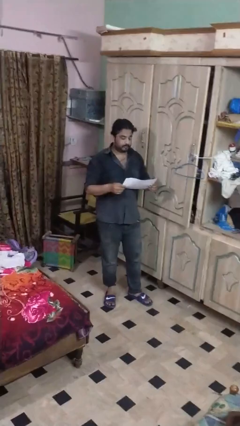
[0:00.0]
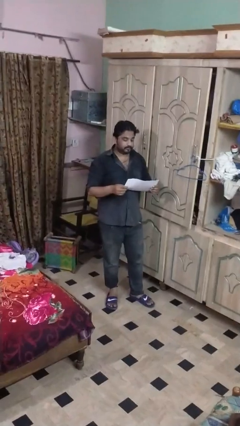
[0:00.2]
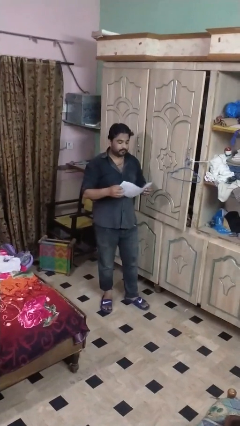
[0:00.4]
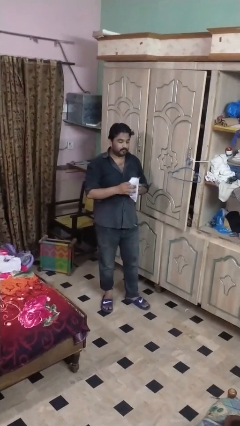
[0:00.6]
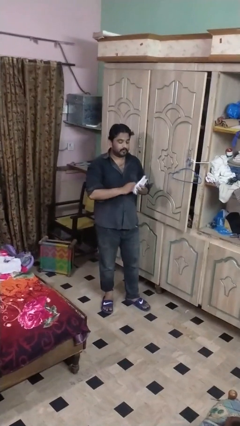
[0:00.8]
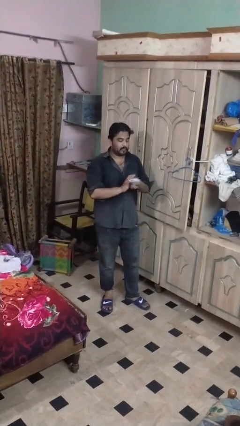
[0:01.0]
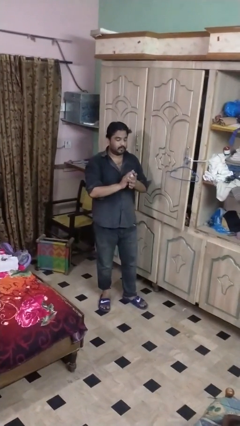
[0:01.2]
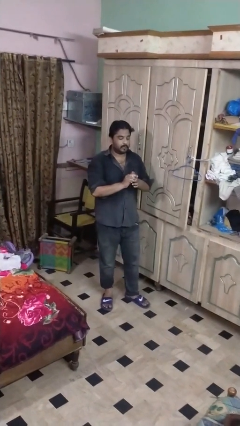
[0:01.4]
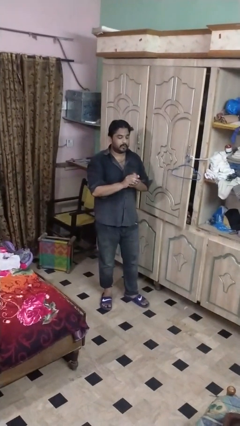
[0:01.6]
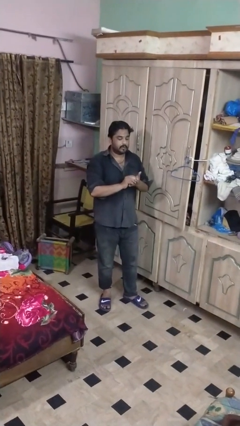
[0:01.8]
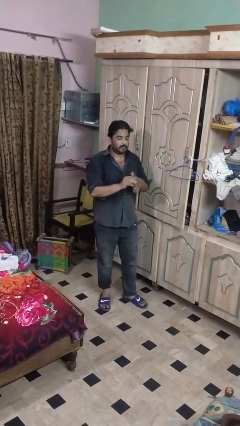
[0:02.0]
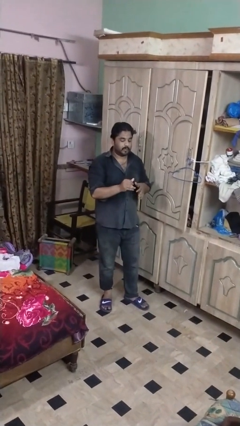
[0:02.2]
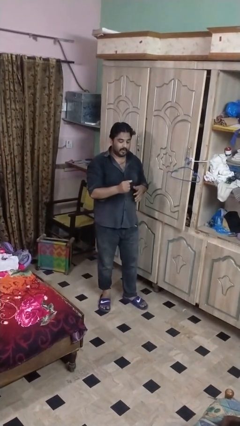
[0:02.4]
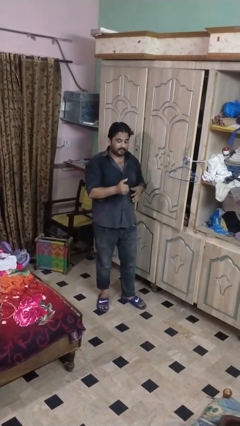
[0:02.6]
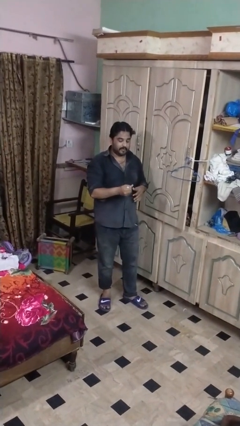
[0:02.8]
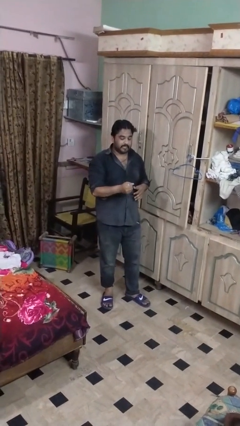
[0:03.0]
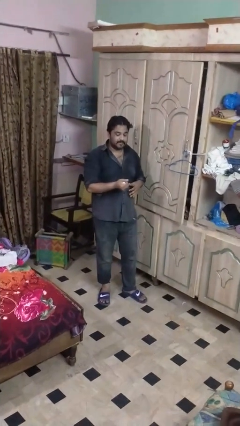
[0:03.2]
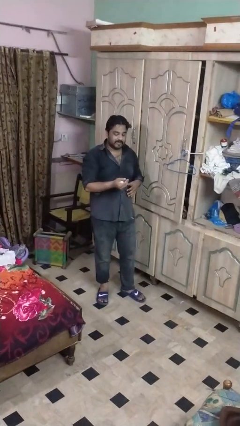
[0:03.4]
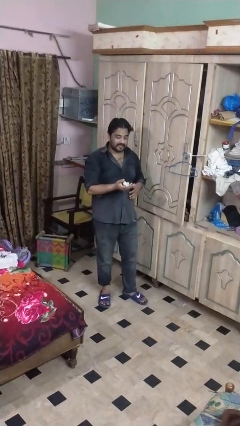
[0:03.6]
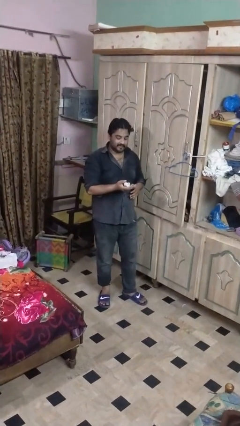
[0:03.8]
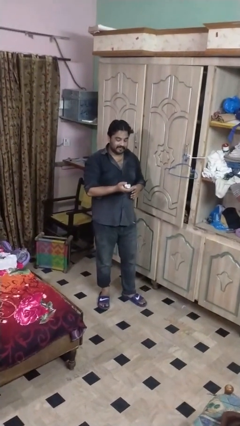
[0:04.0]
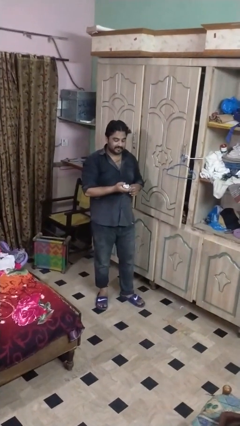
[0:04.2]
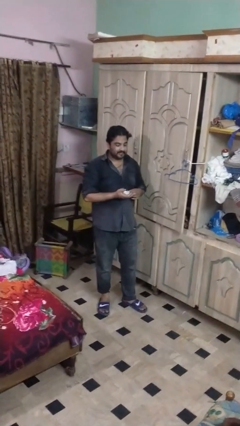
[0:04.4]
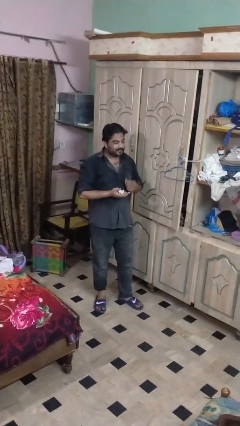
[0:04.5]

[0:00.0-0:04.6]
person crumples paper

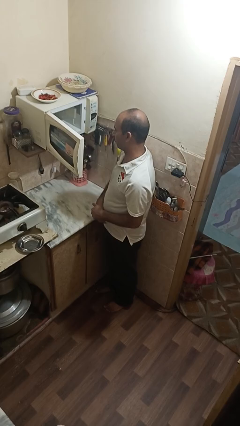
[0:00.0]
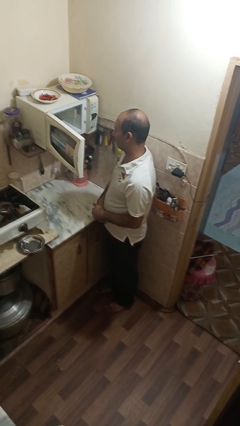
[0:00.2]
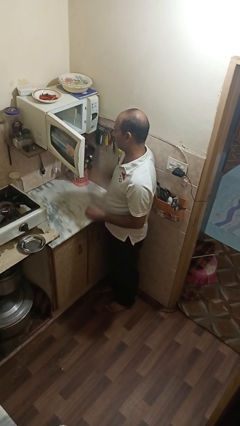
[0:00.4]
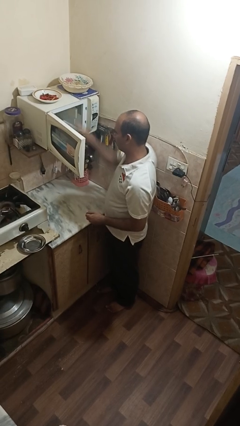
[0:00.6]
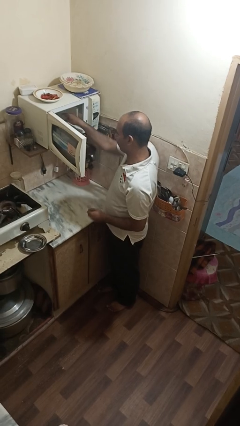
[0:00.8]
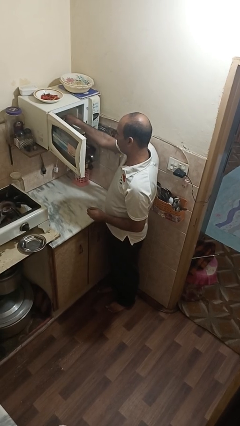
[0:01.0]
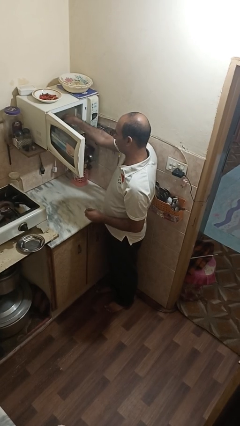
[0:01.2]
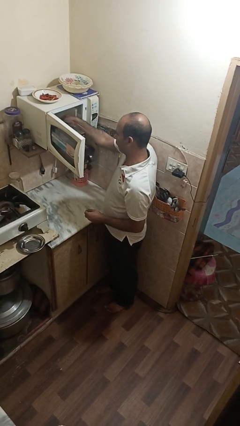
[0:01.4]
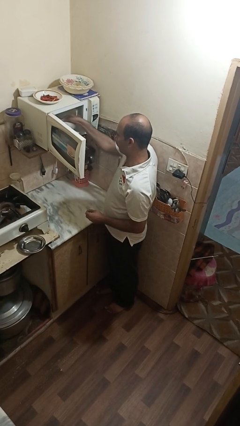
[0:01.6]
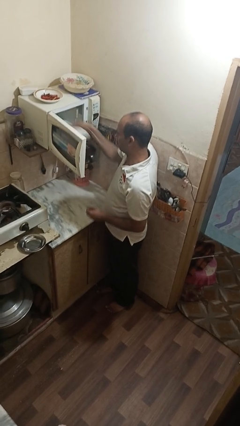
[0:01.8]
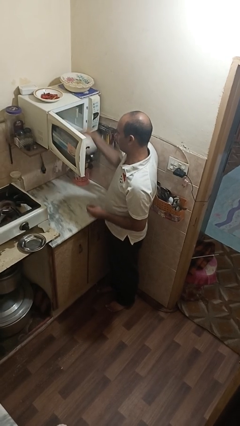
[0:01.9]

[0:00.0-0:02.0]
person takes object from microwave

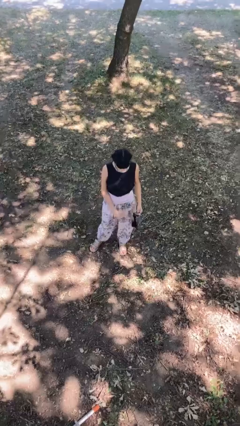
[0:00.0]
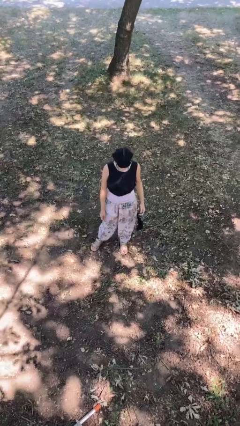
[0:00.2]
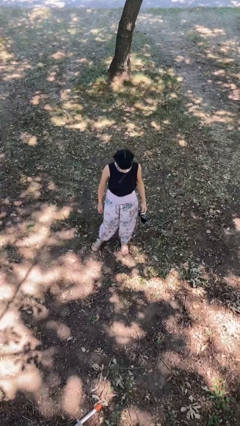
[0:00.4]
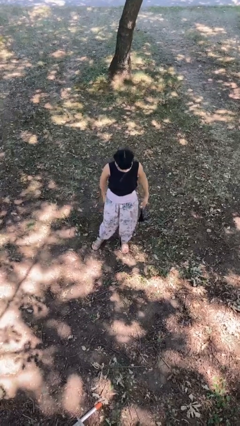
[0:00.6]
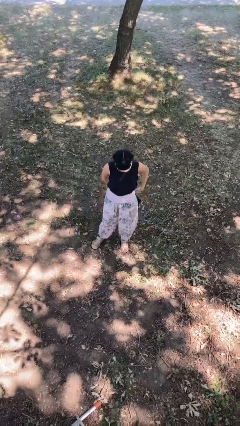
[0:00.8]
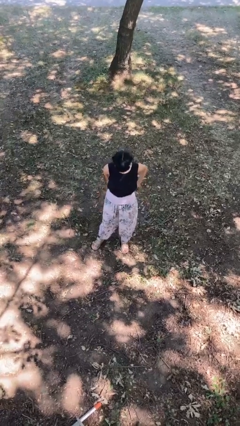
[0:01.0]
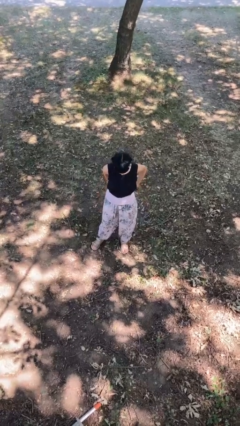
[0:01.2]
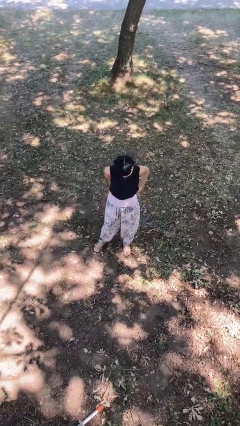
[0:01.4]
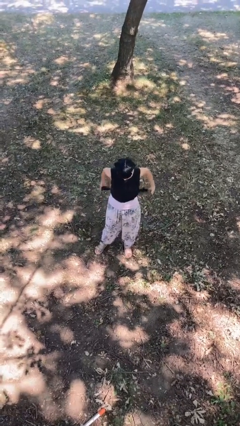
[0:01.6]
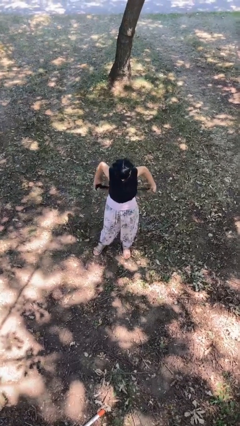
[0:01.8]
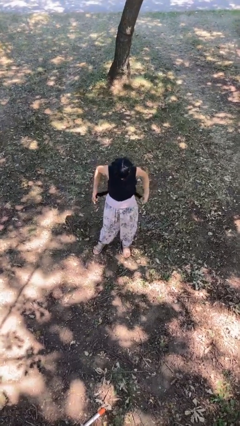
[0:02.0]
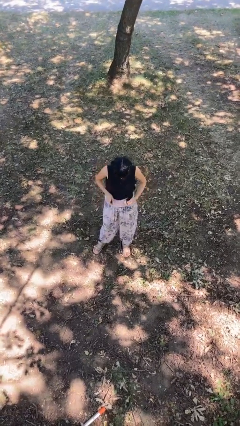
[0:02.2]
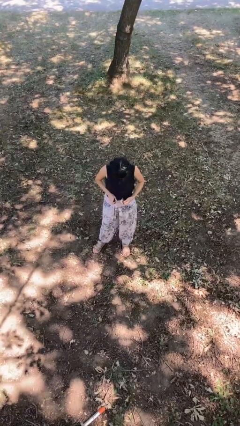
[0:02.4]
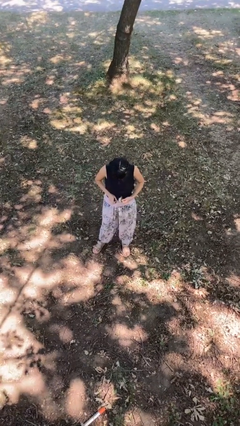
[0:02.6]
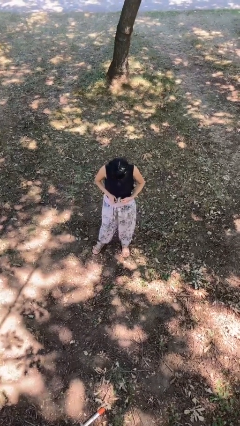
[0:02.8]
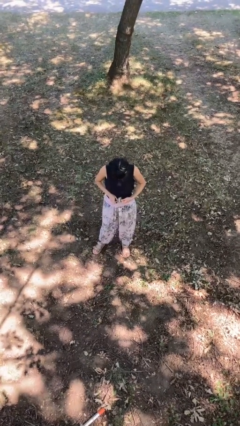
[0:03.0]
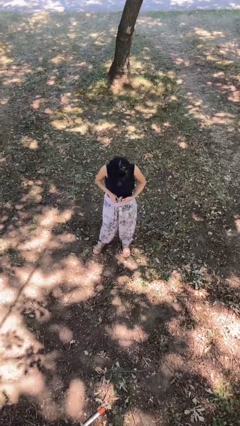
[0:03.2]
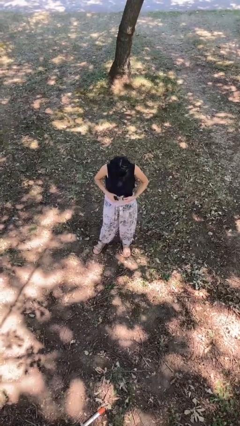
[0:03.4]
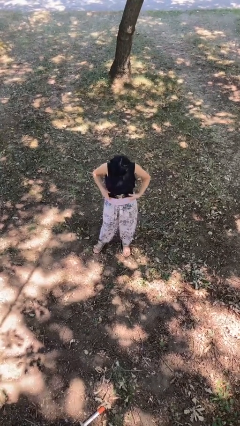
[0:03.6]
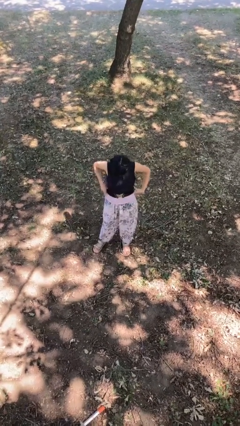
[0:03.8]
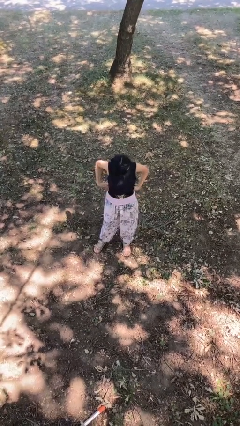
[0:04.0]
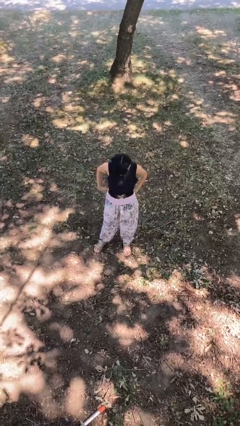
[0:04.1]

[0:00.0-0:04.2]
person puts on belt

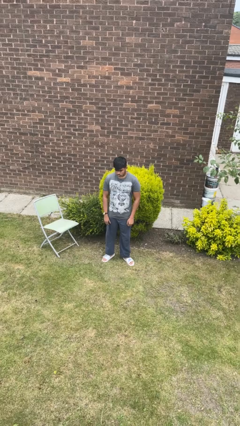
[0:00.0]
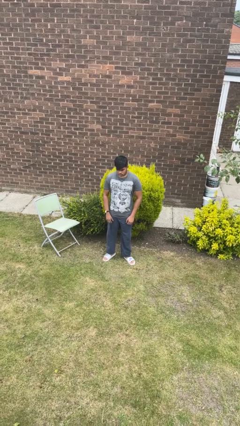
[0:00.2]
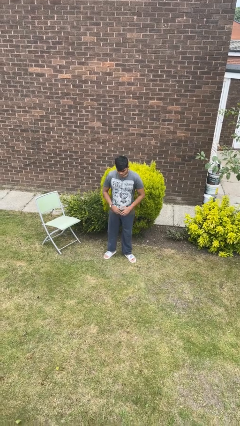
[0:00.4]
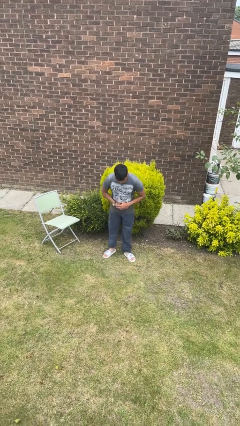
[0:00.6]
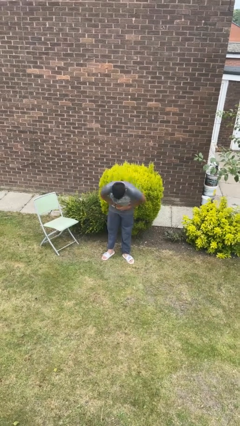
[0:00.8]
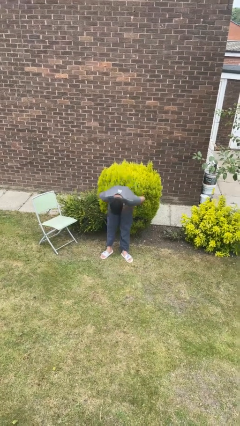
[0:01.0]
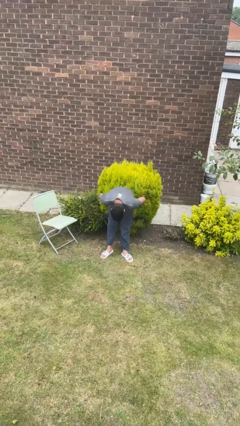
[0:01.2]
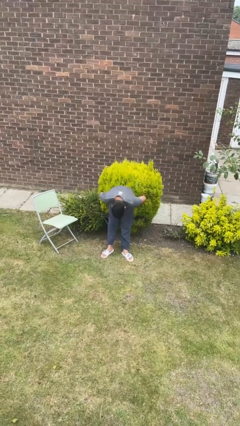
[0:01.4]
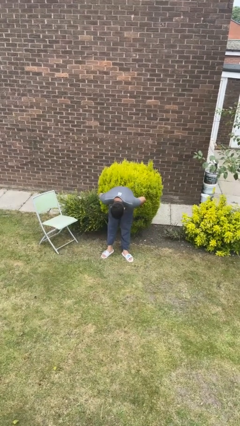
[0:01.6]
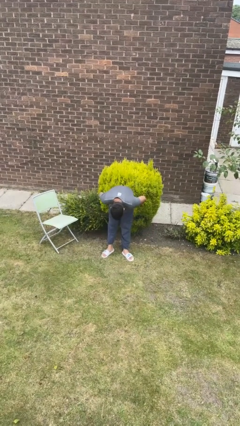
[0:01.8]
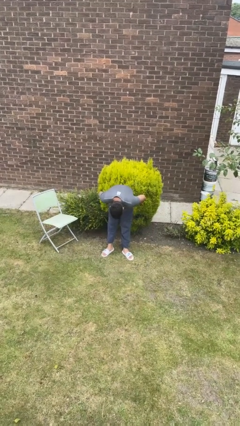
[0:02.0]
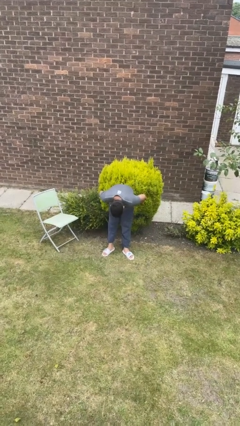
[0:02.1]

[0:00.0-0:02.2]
person bows

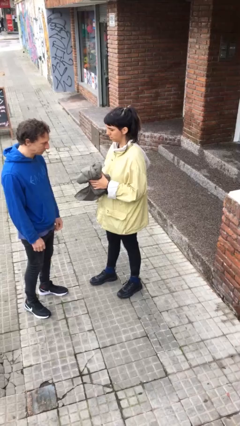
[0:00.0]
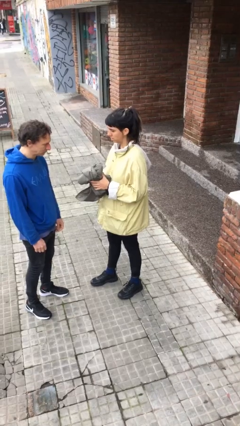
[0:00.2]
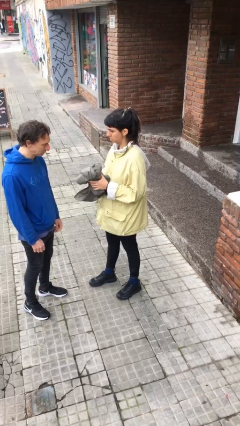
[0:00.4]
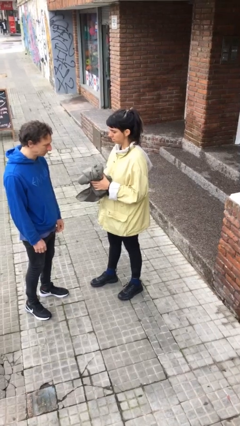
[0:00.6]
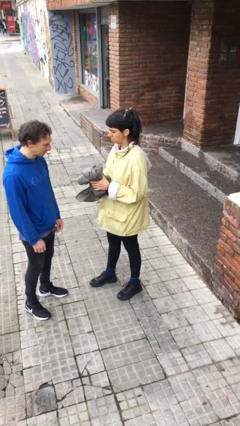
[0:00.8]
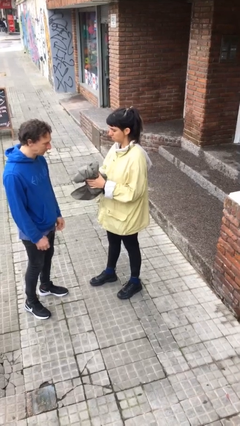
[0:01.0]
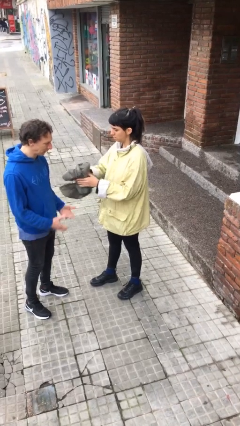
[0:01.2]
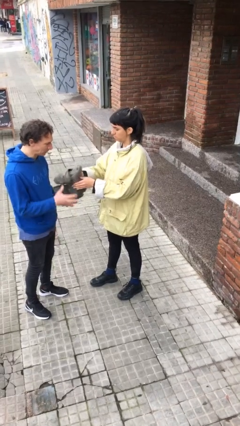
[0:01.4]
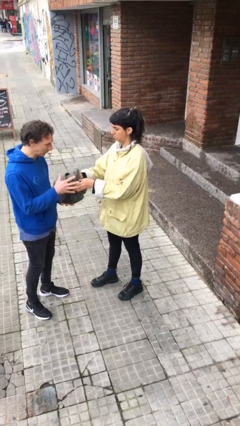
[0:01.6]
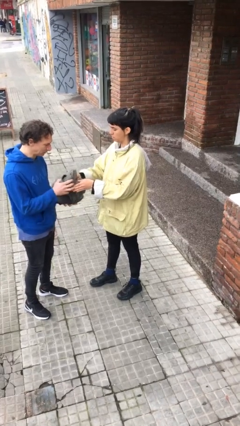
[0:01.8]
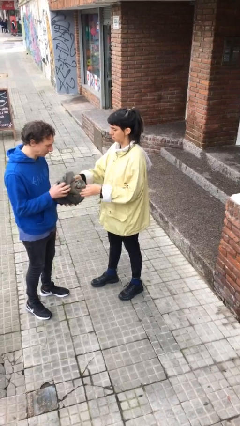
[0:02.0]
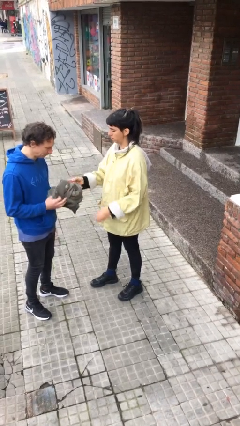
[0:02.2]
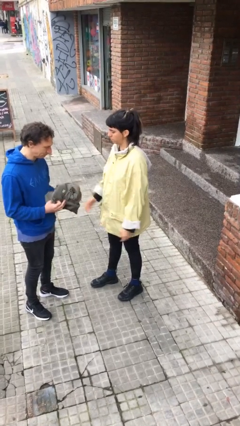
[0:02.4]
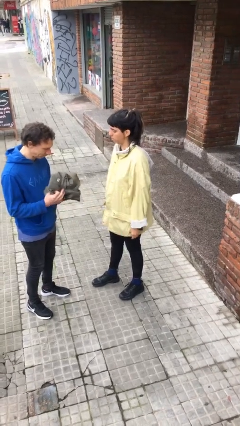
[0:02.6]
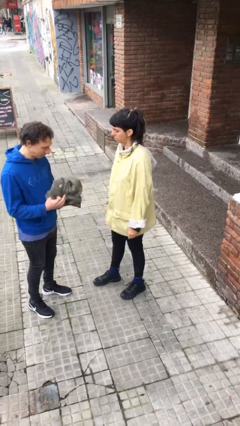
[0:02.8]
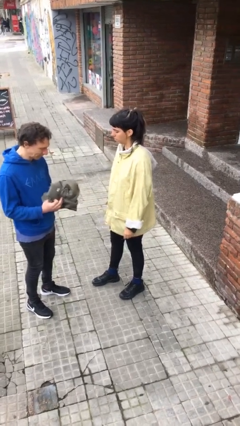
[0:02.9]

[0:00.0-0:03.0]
person transfers object to person

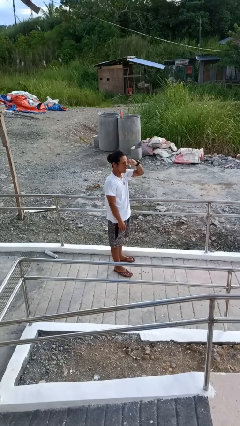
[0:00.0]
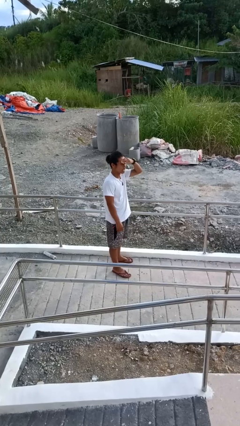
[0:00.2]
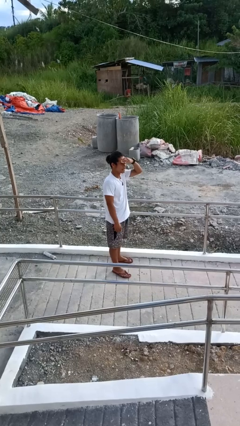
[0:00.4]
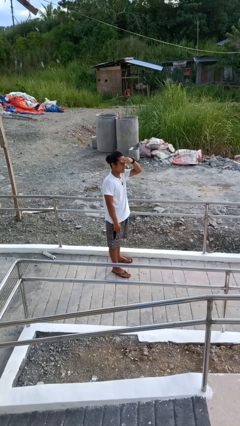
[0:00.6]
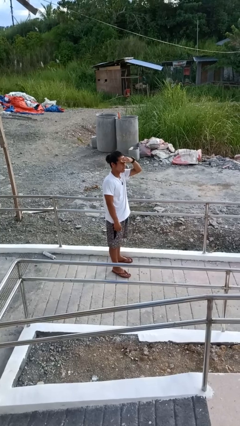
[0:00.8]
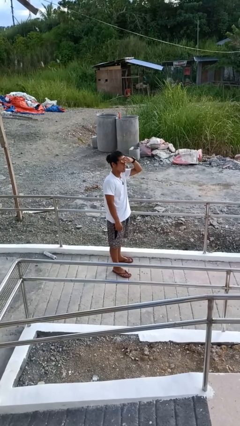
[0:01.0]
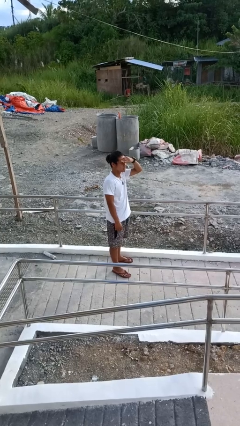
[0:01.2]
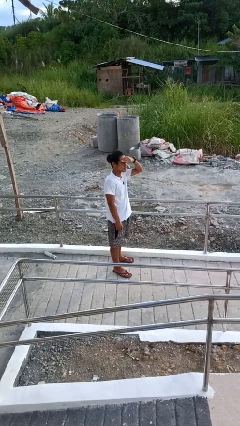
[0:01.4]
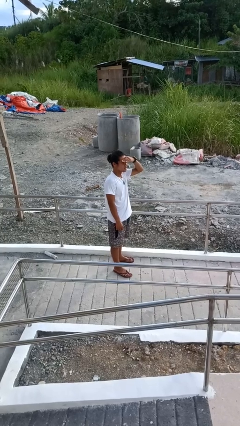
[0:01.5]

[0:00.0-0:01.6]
person shades eyes
